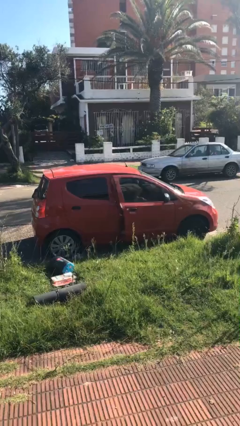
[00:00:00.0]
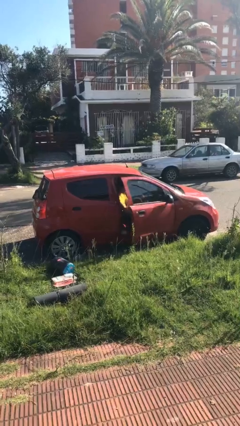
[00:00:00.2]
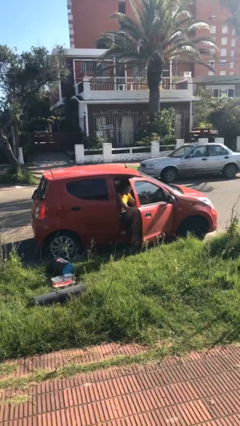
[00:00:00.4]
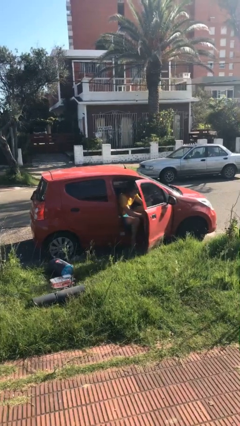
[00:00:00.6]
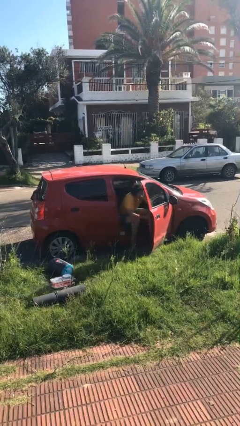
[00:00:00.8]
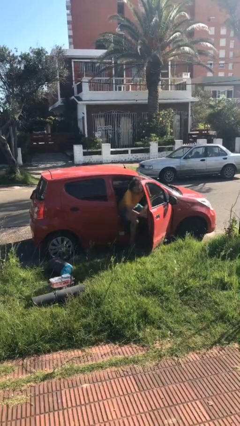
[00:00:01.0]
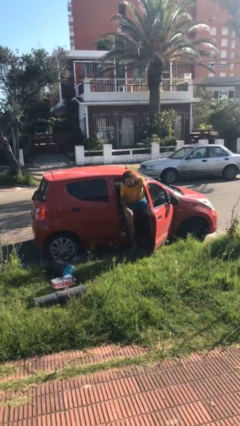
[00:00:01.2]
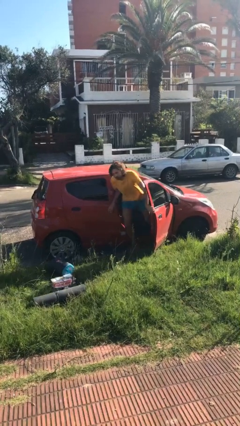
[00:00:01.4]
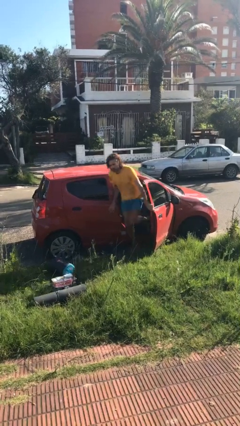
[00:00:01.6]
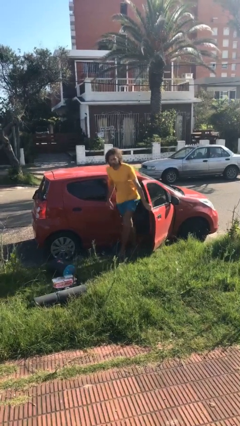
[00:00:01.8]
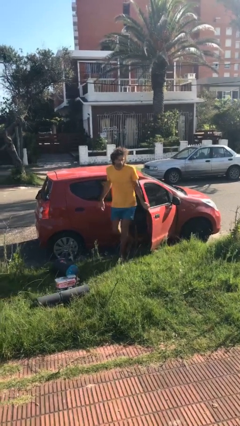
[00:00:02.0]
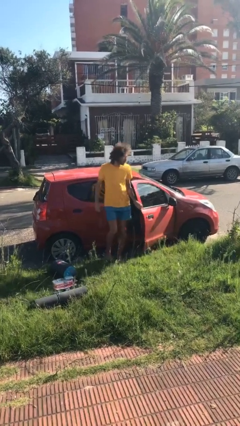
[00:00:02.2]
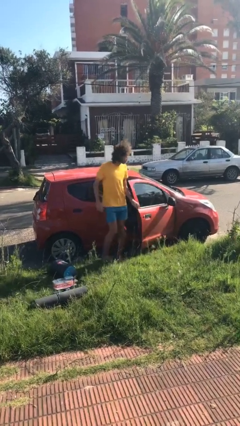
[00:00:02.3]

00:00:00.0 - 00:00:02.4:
car drops off person

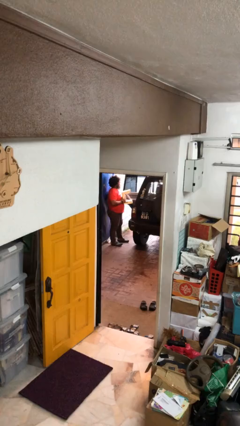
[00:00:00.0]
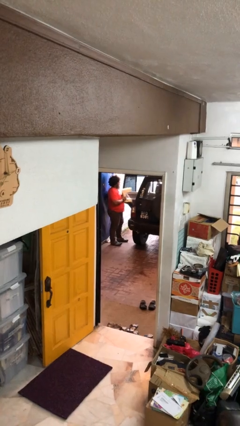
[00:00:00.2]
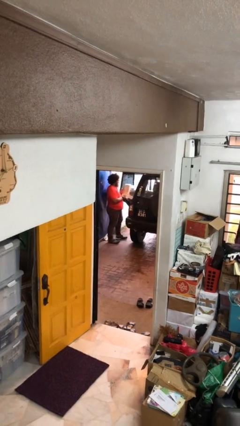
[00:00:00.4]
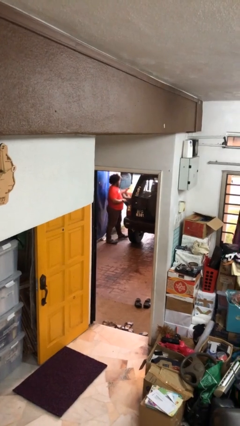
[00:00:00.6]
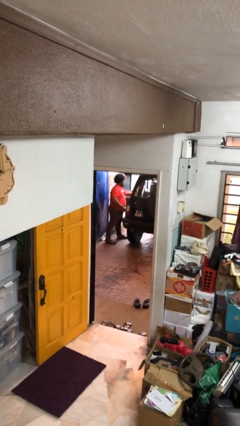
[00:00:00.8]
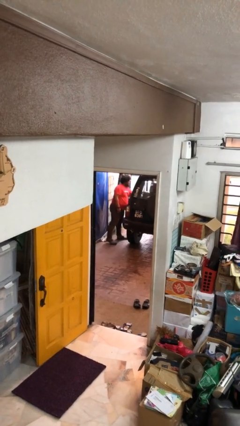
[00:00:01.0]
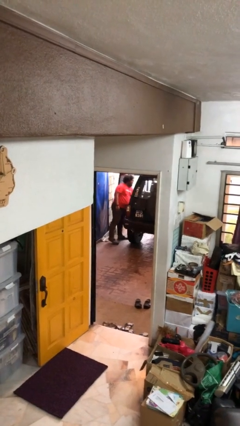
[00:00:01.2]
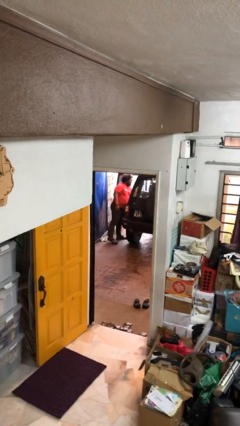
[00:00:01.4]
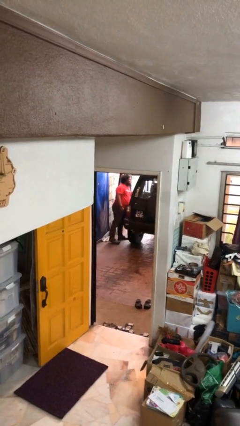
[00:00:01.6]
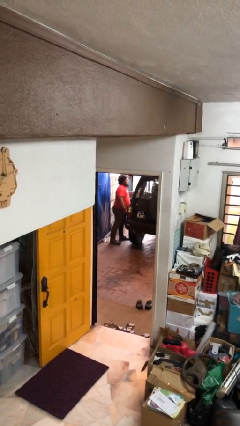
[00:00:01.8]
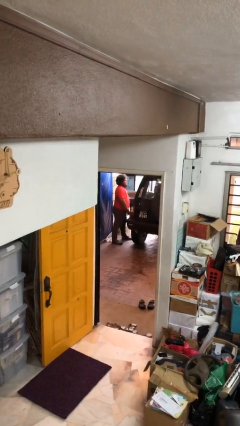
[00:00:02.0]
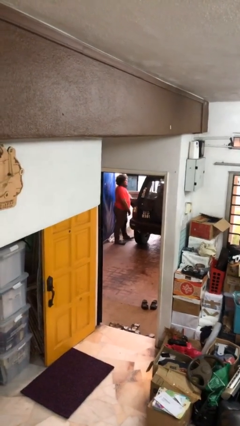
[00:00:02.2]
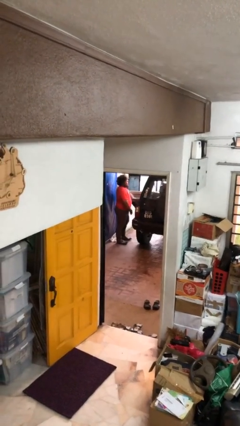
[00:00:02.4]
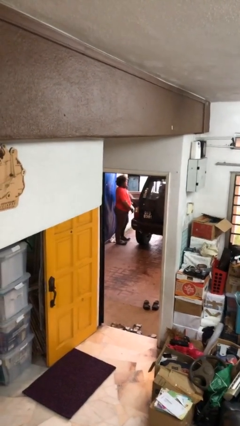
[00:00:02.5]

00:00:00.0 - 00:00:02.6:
person loads car

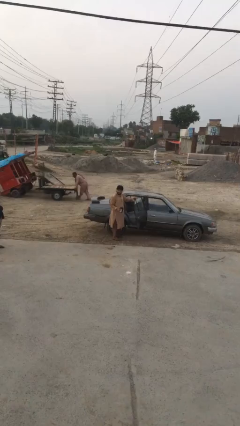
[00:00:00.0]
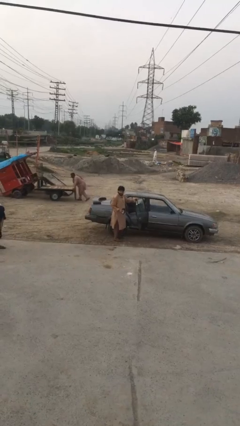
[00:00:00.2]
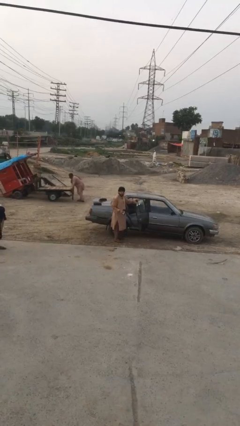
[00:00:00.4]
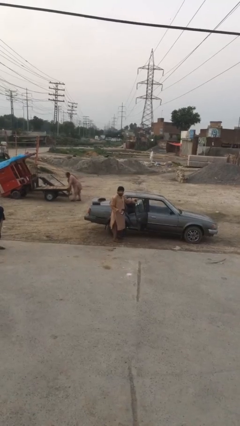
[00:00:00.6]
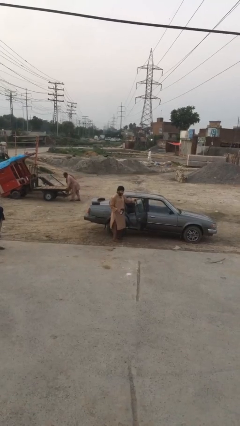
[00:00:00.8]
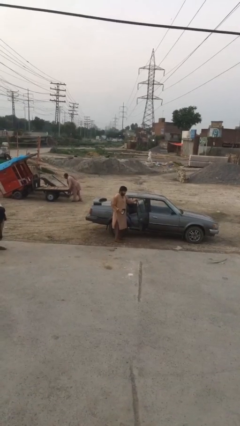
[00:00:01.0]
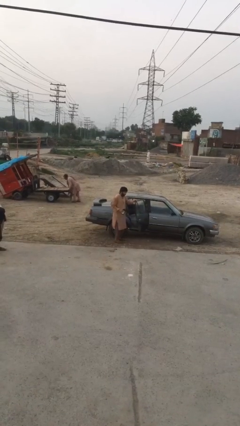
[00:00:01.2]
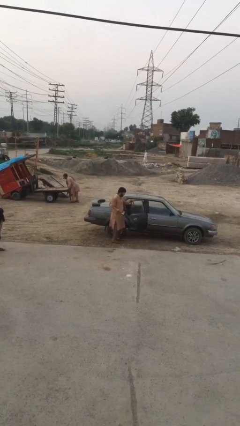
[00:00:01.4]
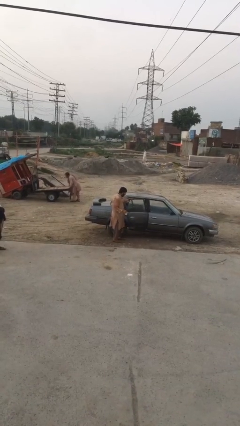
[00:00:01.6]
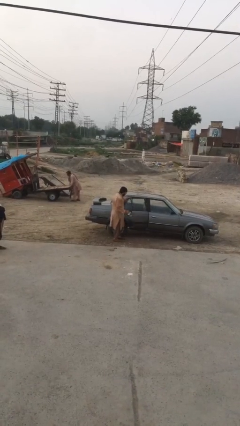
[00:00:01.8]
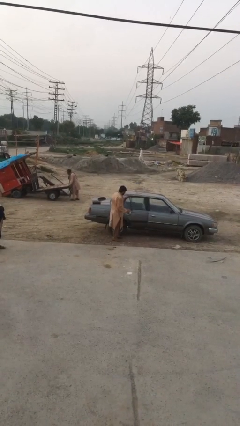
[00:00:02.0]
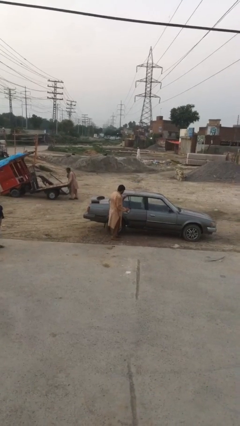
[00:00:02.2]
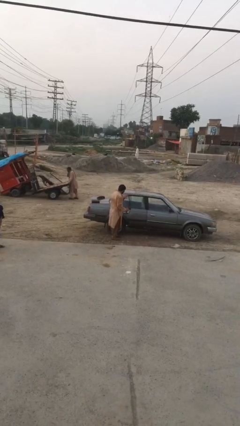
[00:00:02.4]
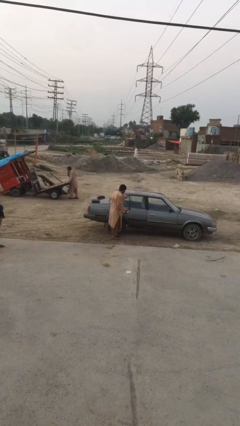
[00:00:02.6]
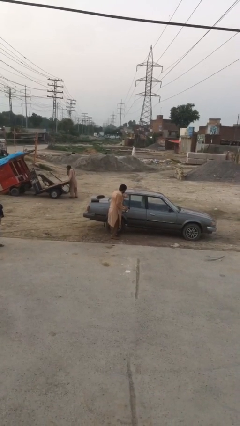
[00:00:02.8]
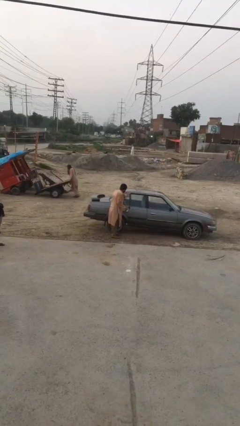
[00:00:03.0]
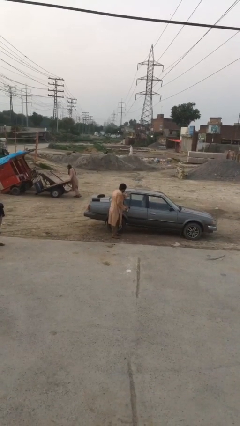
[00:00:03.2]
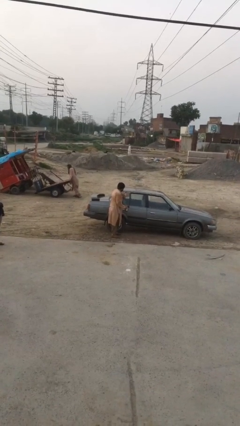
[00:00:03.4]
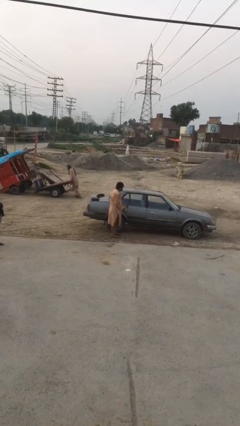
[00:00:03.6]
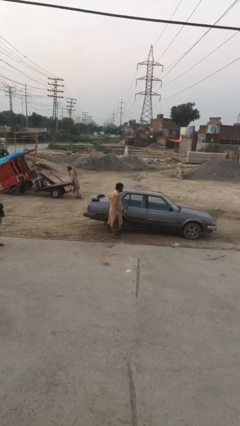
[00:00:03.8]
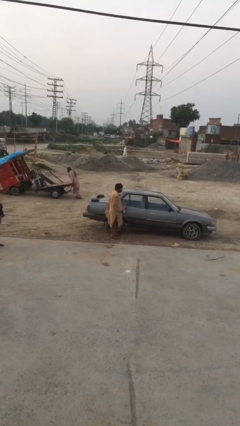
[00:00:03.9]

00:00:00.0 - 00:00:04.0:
person closes car door

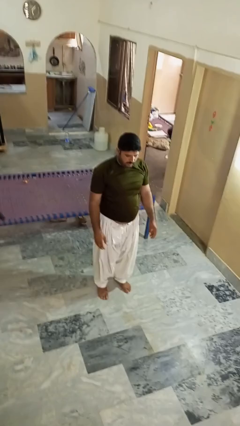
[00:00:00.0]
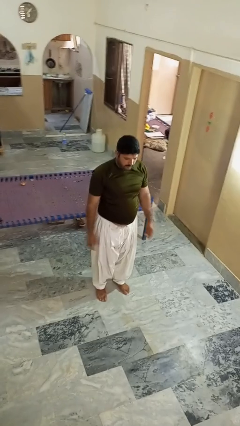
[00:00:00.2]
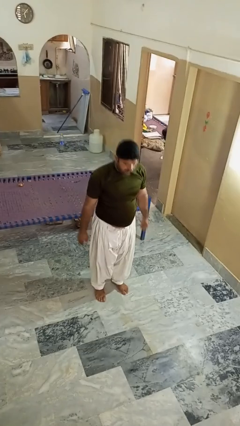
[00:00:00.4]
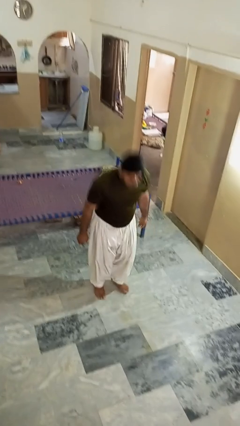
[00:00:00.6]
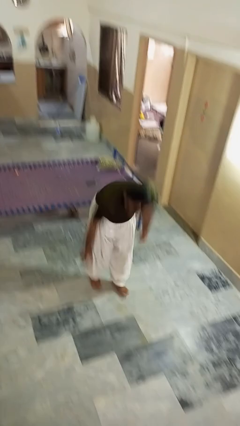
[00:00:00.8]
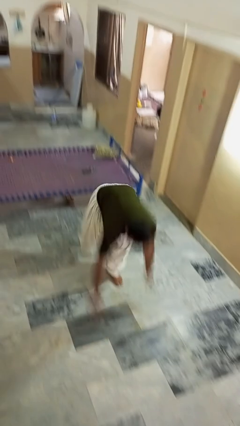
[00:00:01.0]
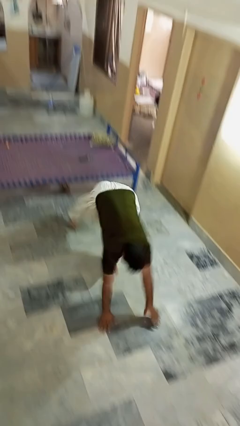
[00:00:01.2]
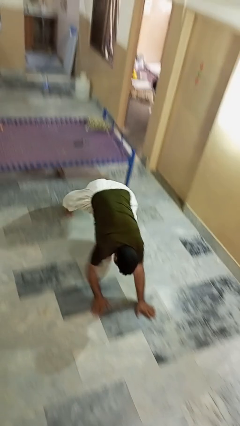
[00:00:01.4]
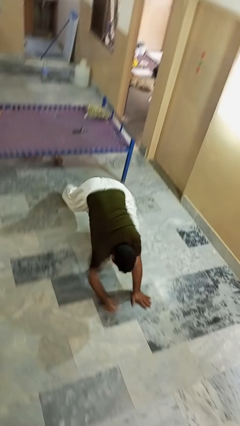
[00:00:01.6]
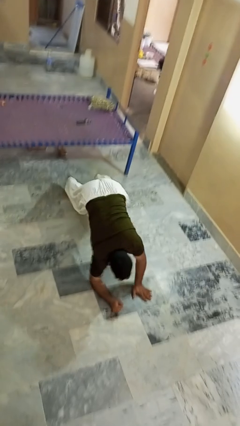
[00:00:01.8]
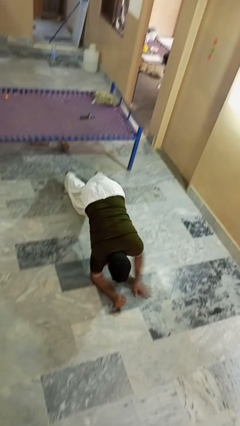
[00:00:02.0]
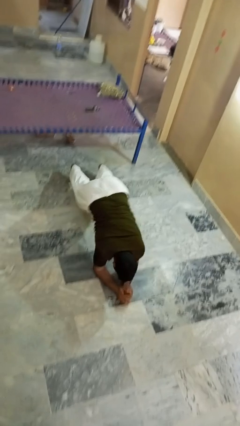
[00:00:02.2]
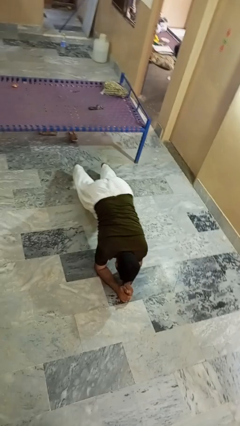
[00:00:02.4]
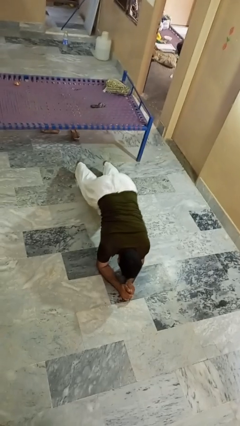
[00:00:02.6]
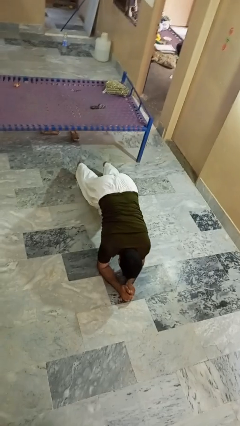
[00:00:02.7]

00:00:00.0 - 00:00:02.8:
person exercises with plank

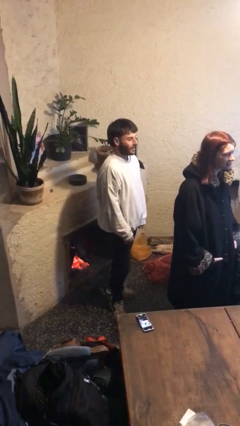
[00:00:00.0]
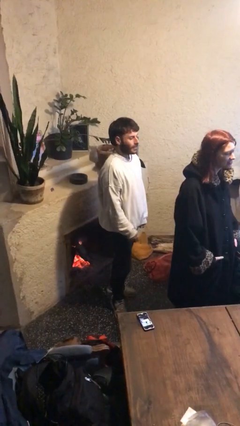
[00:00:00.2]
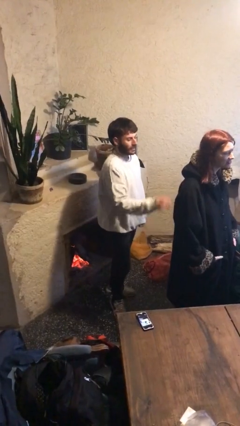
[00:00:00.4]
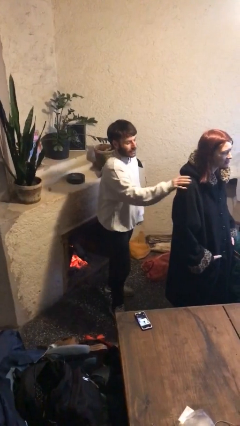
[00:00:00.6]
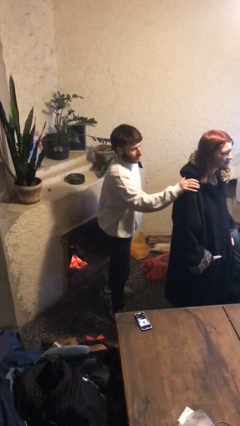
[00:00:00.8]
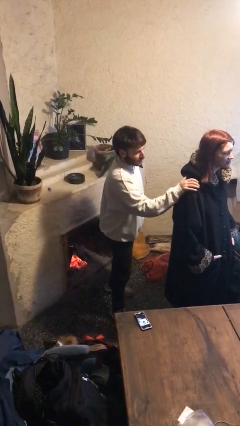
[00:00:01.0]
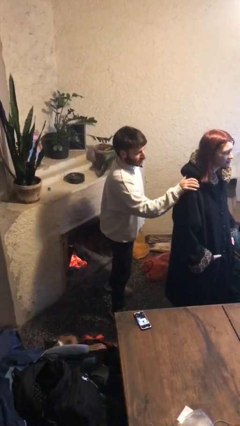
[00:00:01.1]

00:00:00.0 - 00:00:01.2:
person grabs person by shoulder

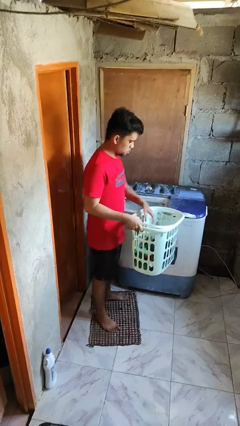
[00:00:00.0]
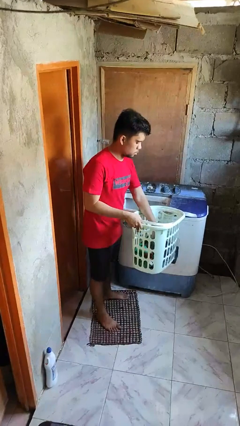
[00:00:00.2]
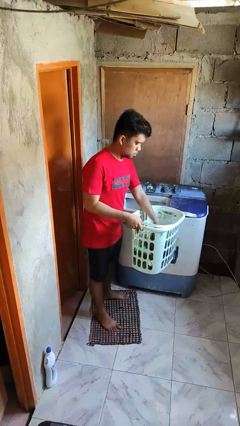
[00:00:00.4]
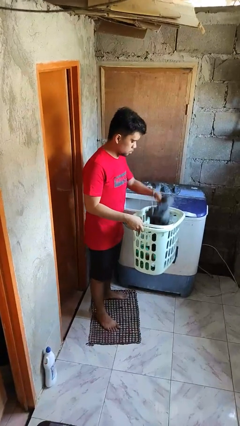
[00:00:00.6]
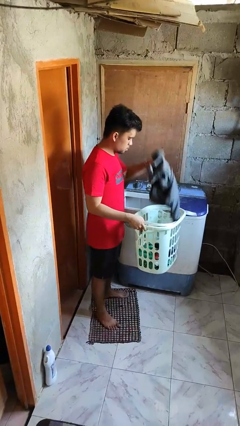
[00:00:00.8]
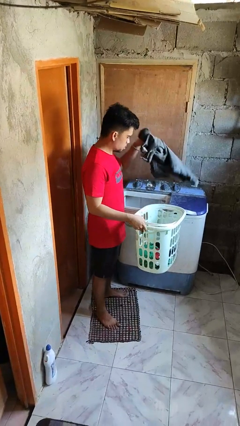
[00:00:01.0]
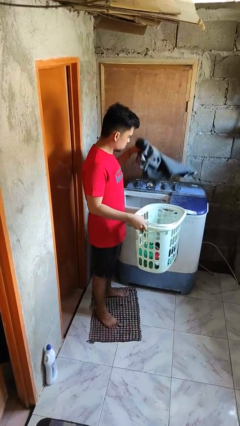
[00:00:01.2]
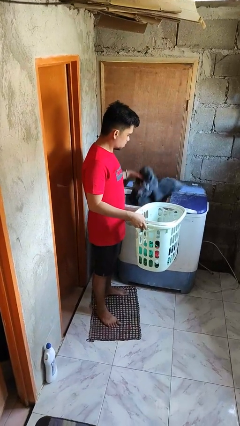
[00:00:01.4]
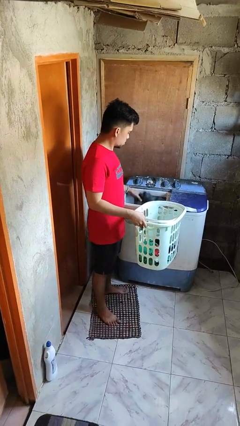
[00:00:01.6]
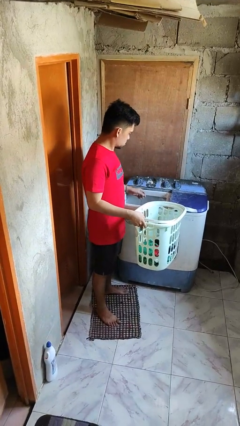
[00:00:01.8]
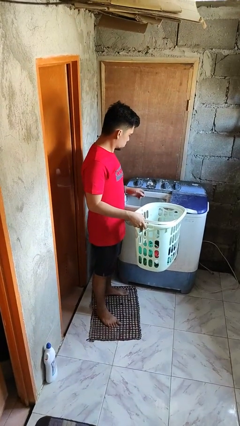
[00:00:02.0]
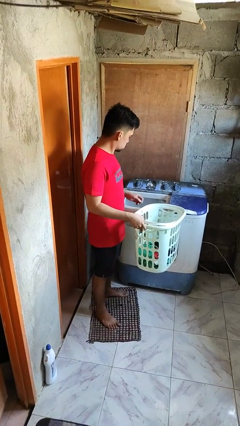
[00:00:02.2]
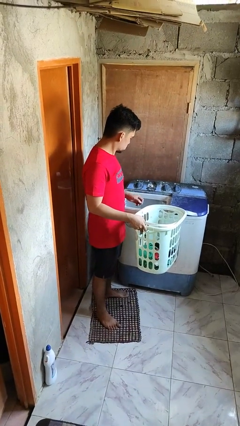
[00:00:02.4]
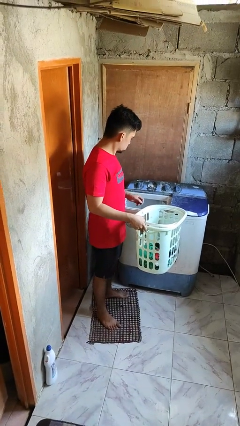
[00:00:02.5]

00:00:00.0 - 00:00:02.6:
person loads clotheswasher

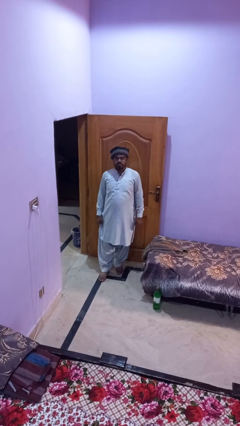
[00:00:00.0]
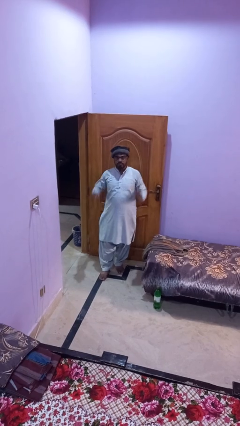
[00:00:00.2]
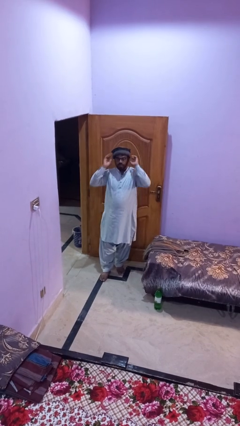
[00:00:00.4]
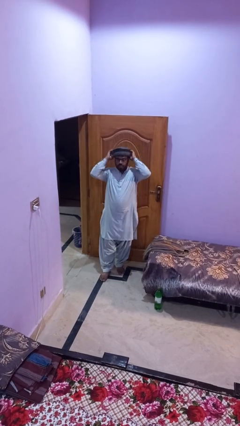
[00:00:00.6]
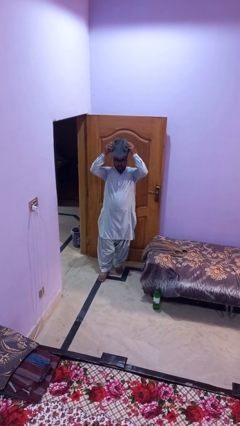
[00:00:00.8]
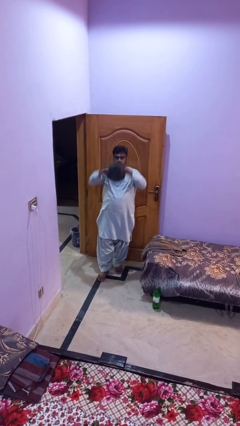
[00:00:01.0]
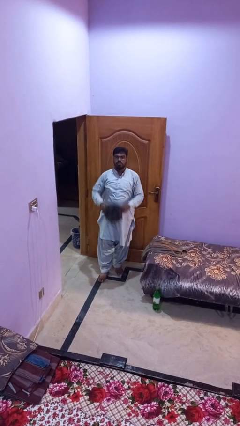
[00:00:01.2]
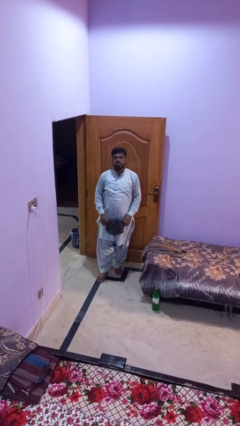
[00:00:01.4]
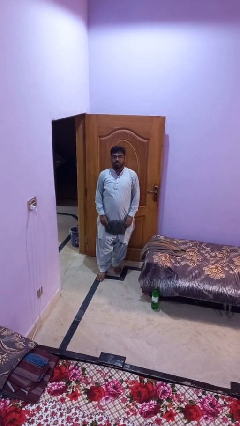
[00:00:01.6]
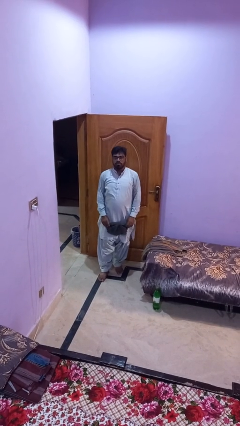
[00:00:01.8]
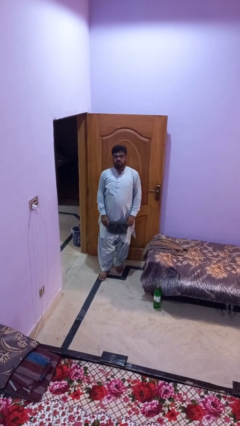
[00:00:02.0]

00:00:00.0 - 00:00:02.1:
person takes off hat
